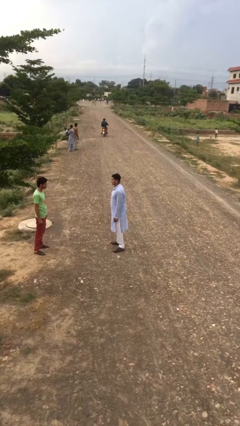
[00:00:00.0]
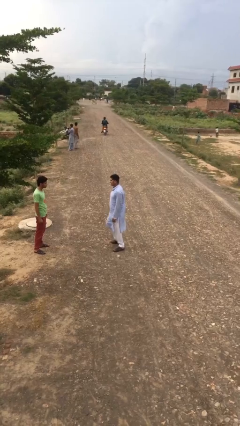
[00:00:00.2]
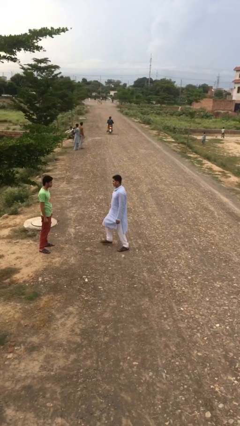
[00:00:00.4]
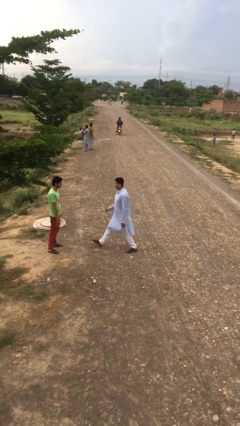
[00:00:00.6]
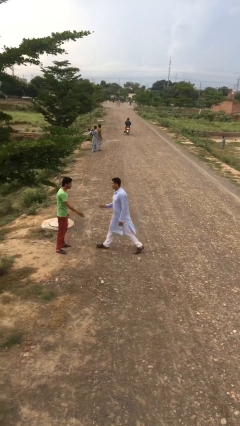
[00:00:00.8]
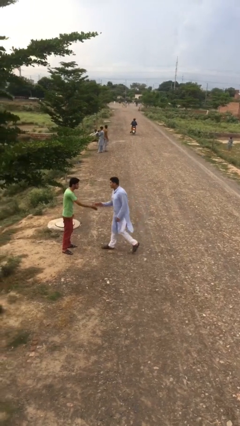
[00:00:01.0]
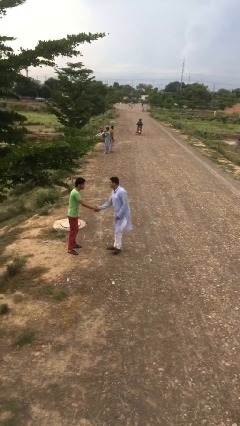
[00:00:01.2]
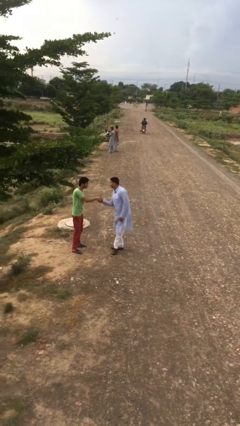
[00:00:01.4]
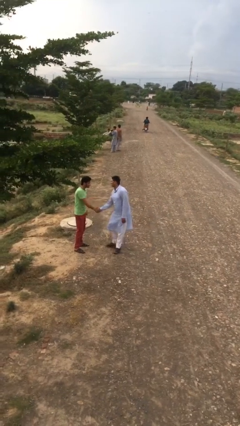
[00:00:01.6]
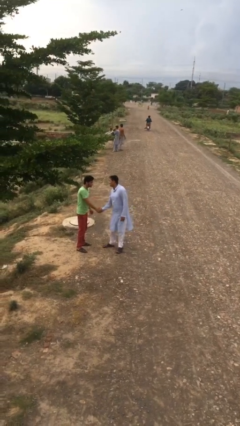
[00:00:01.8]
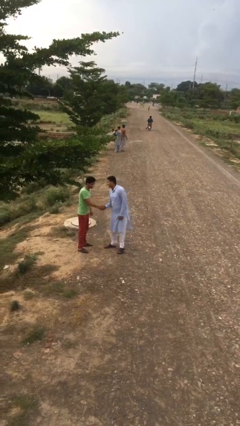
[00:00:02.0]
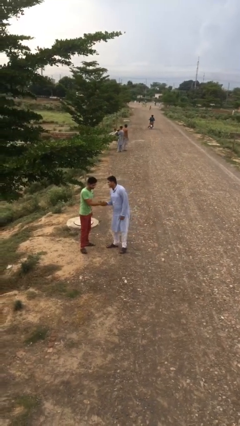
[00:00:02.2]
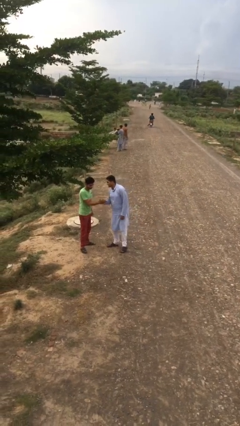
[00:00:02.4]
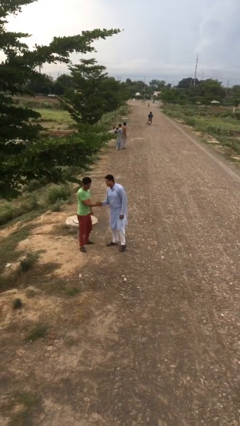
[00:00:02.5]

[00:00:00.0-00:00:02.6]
person shakes hand

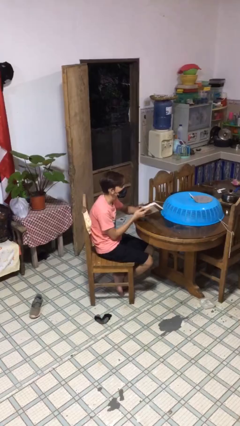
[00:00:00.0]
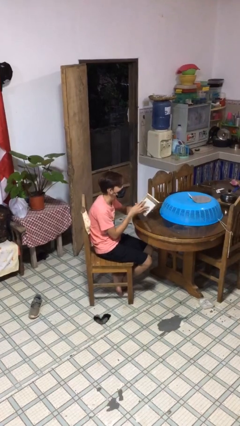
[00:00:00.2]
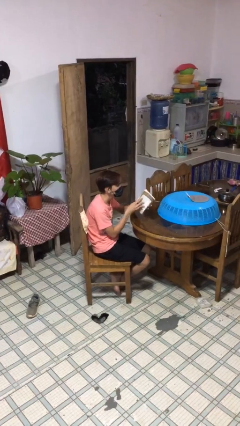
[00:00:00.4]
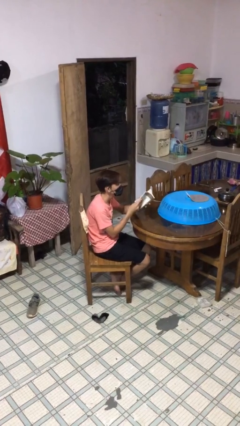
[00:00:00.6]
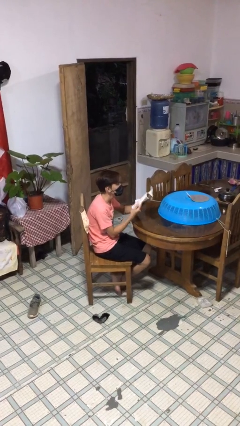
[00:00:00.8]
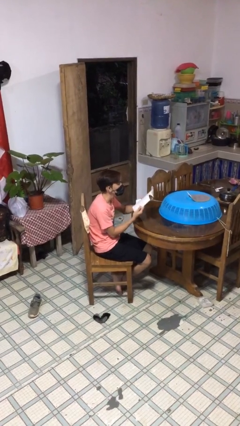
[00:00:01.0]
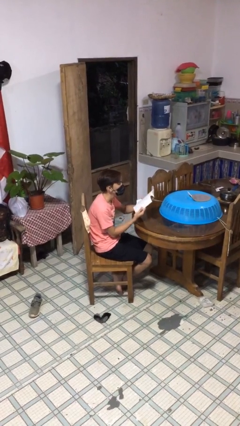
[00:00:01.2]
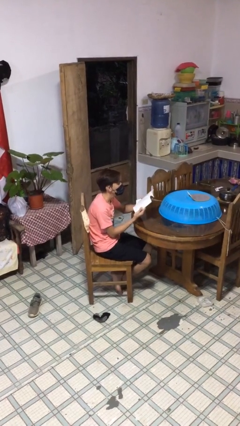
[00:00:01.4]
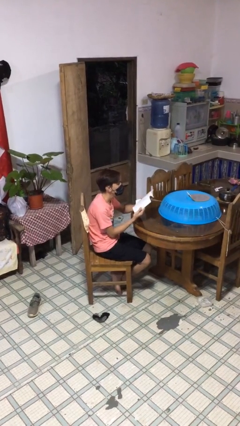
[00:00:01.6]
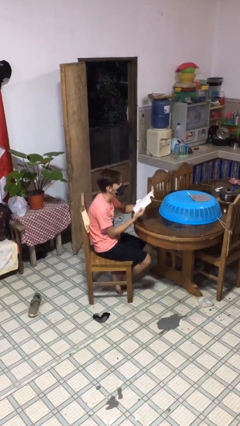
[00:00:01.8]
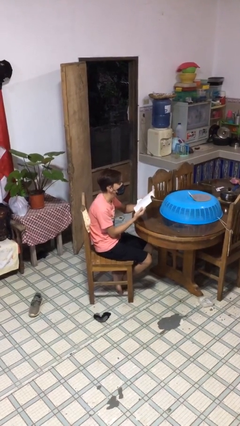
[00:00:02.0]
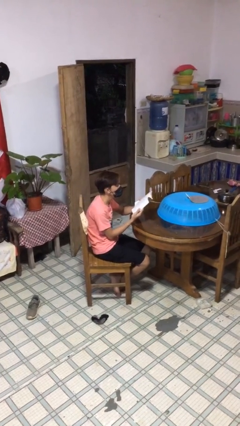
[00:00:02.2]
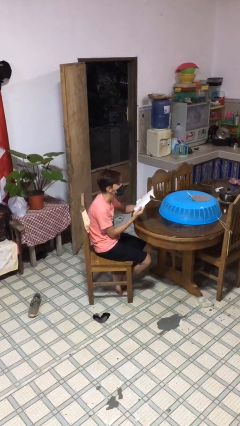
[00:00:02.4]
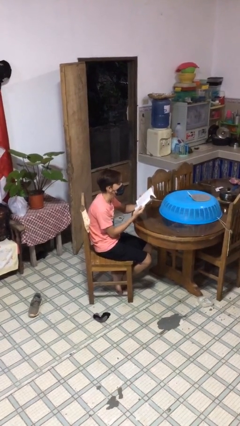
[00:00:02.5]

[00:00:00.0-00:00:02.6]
person reads document

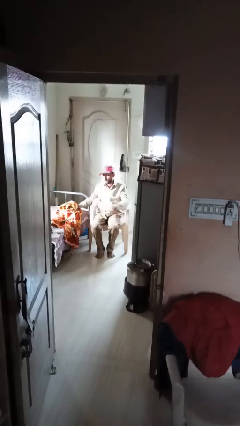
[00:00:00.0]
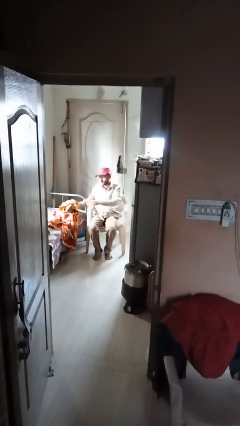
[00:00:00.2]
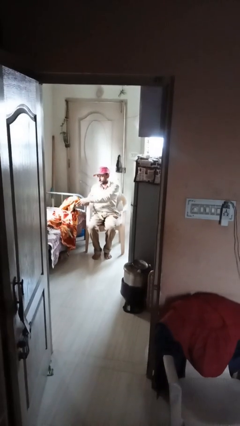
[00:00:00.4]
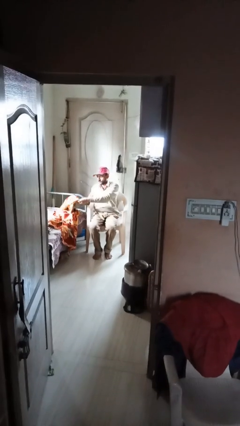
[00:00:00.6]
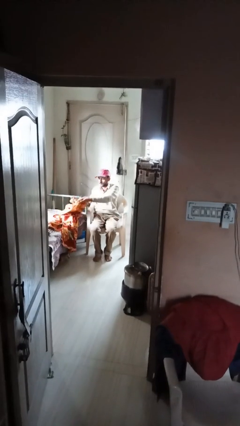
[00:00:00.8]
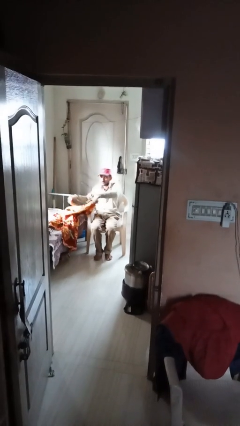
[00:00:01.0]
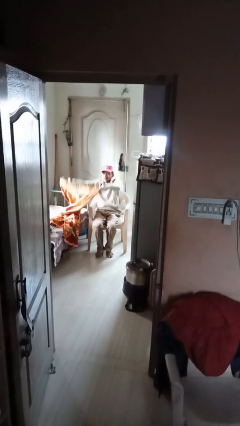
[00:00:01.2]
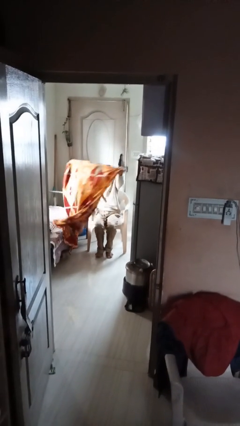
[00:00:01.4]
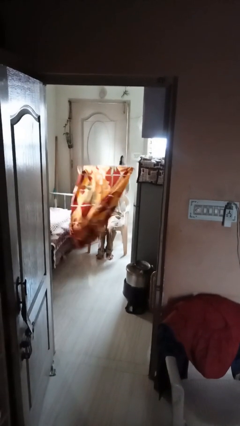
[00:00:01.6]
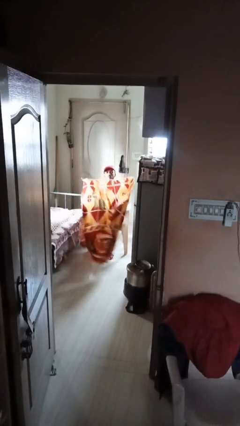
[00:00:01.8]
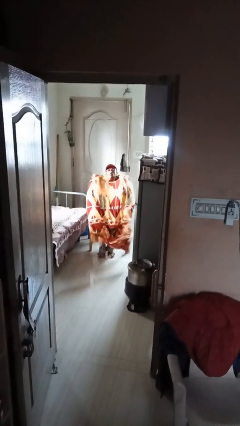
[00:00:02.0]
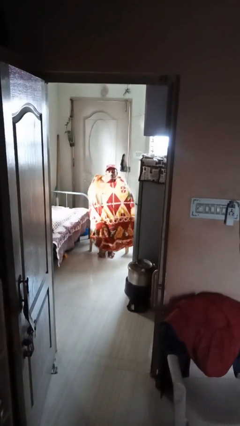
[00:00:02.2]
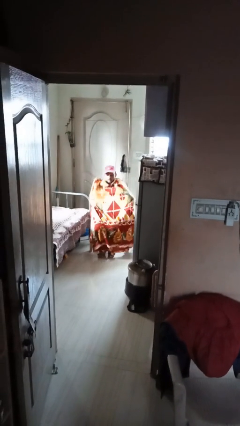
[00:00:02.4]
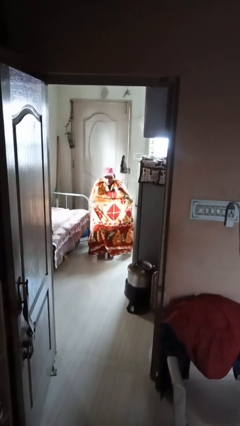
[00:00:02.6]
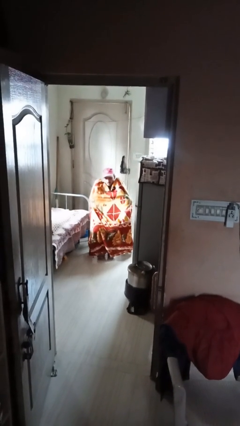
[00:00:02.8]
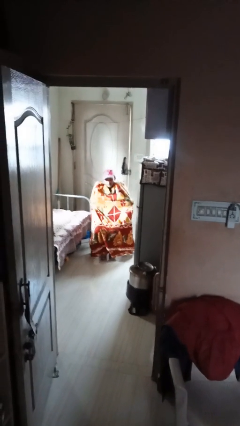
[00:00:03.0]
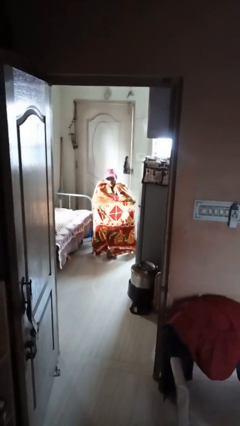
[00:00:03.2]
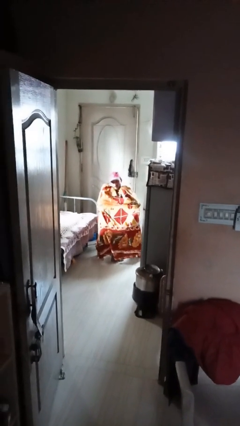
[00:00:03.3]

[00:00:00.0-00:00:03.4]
person covers with blanket

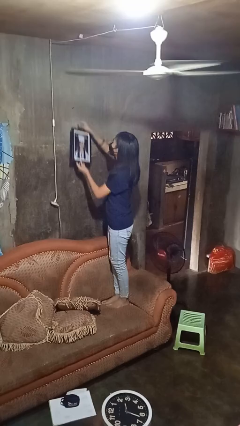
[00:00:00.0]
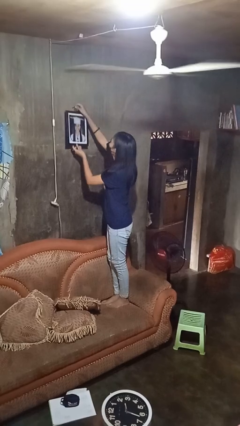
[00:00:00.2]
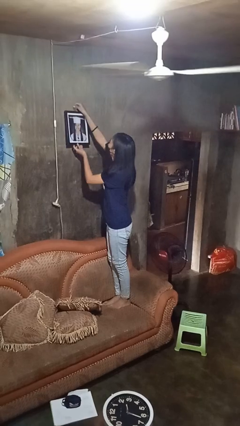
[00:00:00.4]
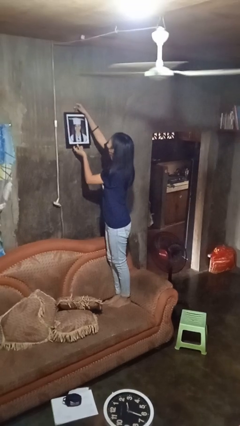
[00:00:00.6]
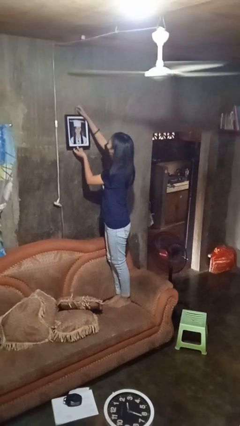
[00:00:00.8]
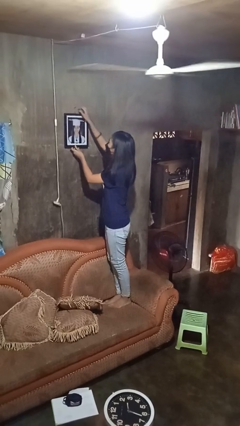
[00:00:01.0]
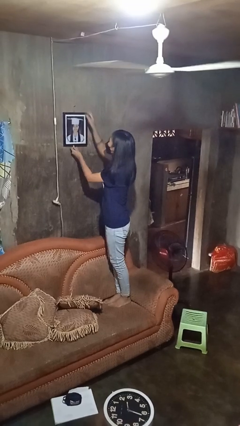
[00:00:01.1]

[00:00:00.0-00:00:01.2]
person puts up picture frame

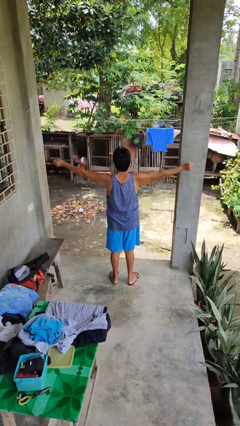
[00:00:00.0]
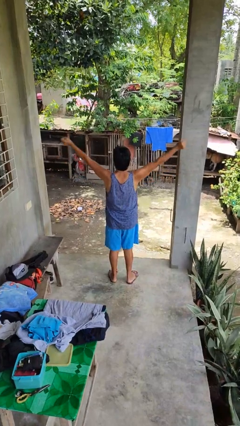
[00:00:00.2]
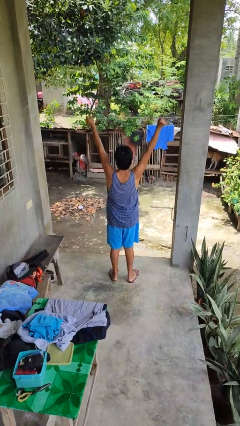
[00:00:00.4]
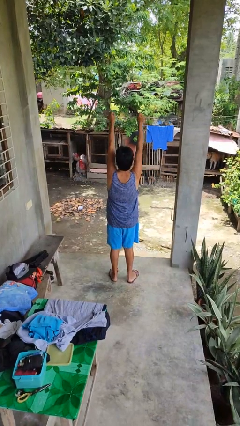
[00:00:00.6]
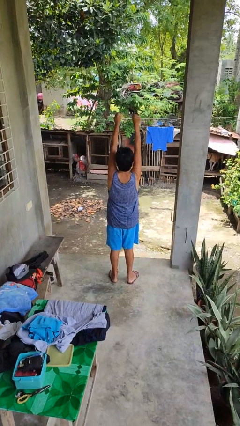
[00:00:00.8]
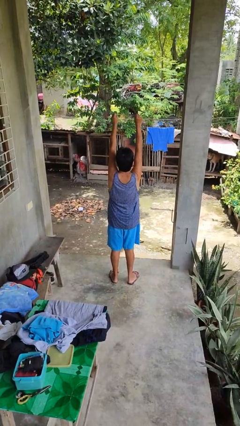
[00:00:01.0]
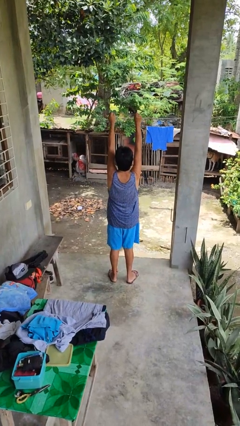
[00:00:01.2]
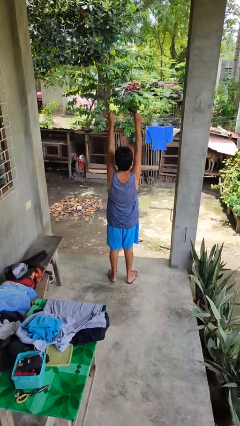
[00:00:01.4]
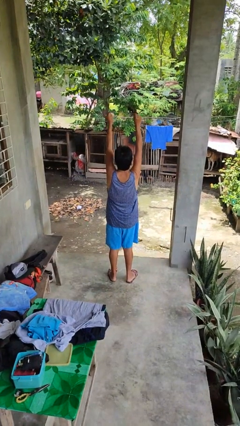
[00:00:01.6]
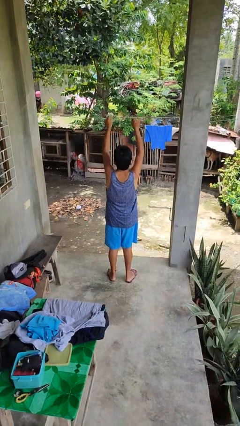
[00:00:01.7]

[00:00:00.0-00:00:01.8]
person stretches arms over head

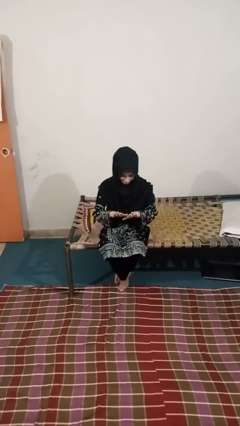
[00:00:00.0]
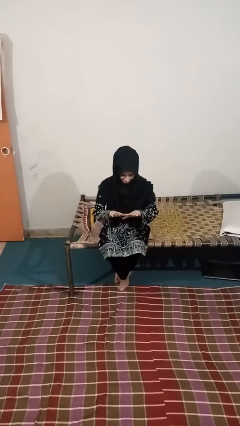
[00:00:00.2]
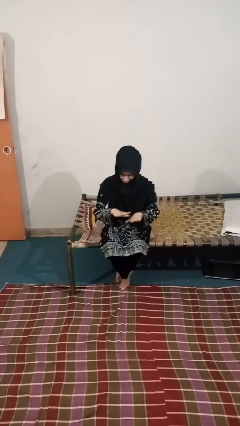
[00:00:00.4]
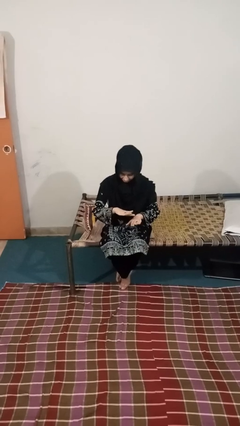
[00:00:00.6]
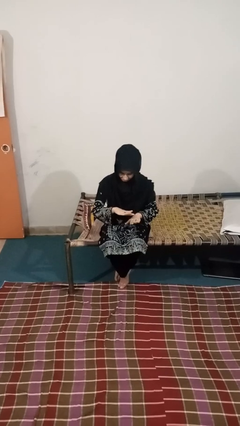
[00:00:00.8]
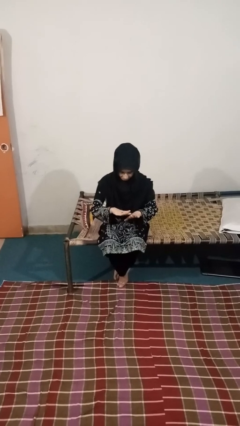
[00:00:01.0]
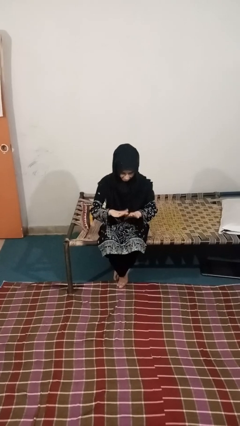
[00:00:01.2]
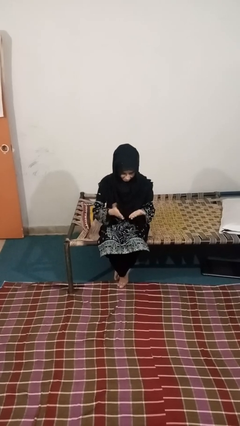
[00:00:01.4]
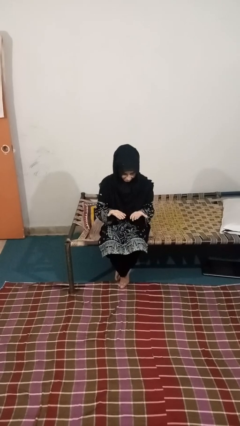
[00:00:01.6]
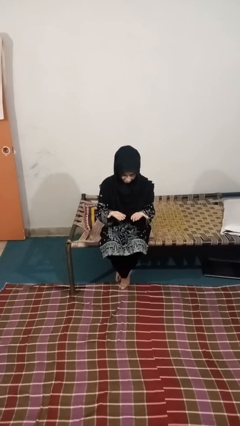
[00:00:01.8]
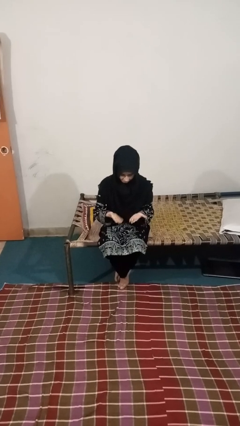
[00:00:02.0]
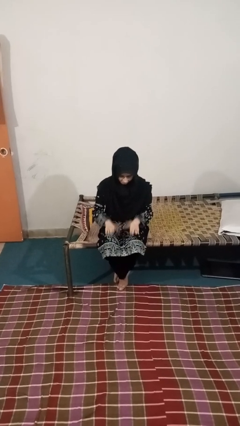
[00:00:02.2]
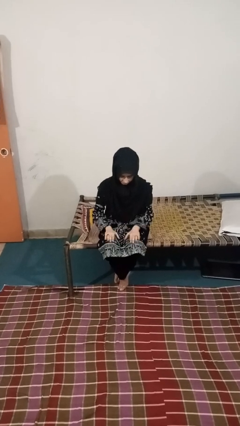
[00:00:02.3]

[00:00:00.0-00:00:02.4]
person looks at hands in lap

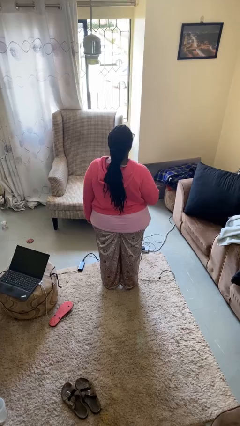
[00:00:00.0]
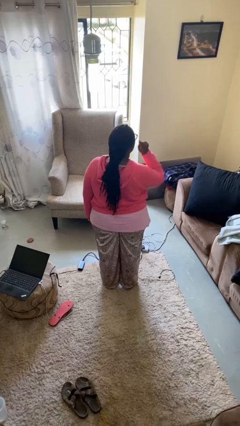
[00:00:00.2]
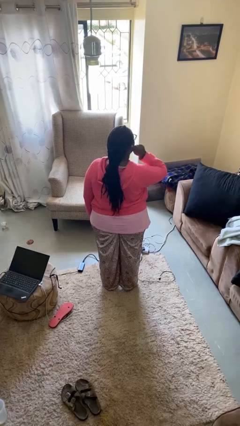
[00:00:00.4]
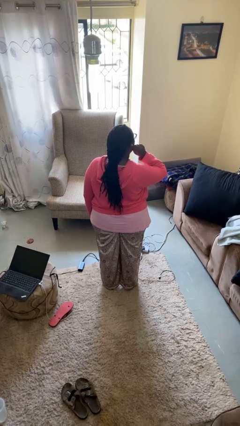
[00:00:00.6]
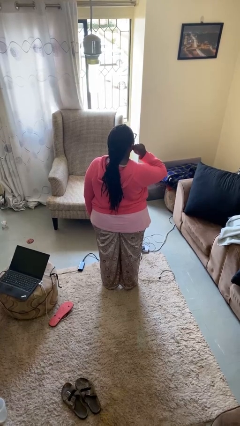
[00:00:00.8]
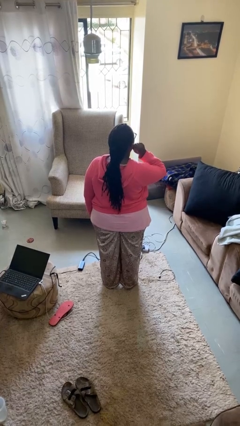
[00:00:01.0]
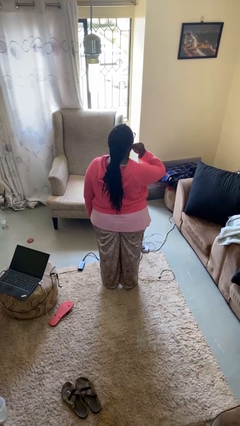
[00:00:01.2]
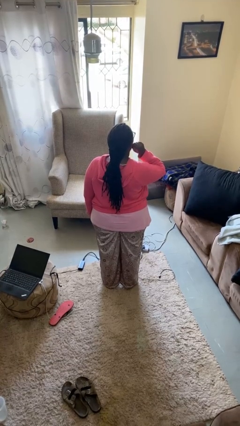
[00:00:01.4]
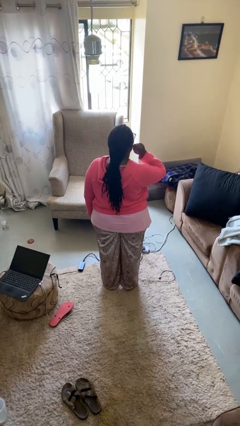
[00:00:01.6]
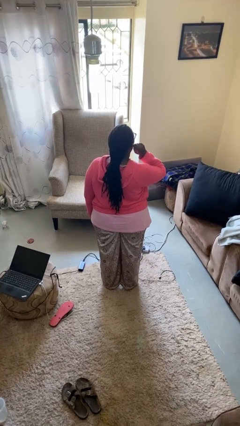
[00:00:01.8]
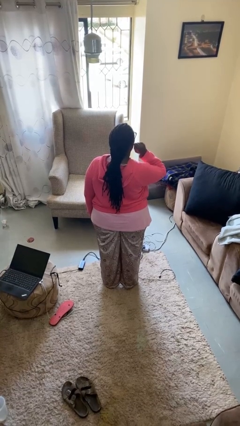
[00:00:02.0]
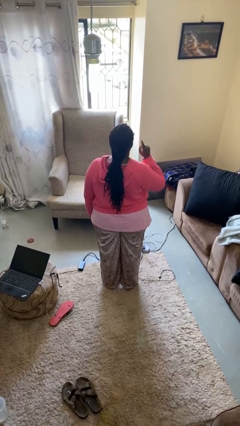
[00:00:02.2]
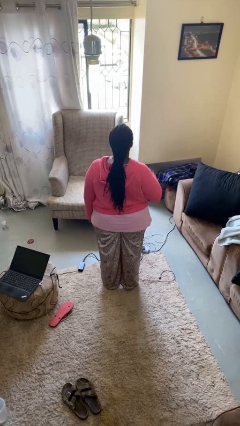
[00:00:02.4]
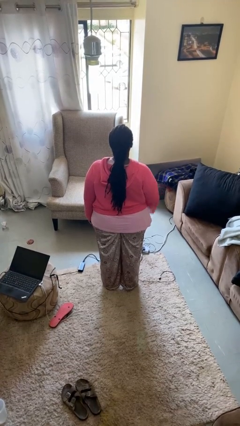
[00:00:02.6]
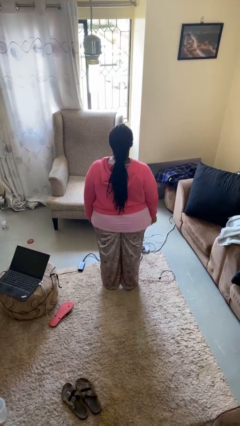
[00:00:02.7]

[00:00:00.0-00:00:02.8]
person gestures listen closely

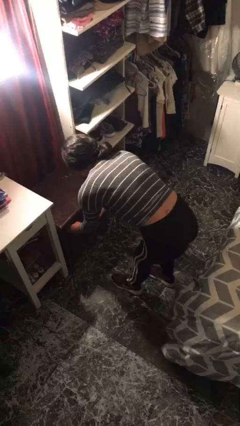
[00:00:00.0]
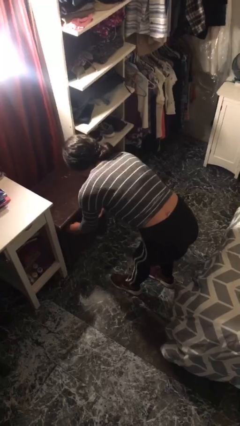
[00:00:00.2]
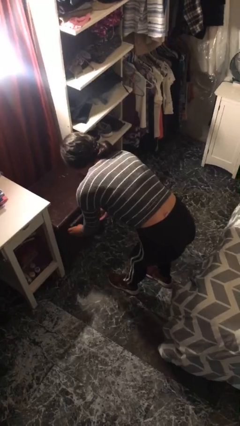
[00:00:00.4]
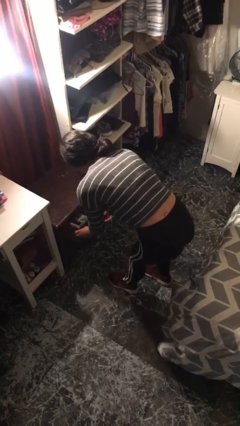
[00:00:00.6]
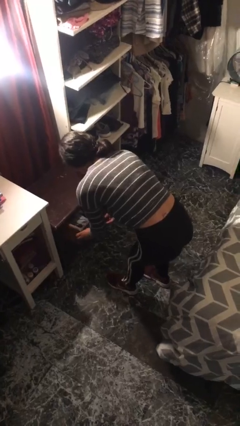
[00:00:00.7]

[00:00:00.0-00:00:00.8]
person opens dresser drawer
